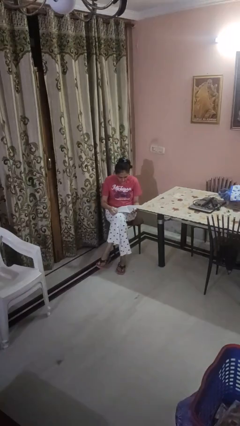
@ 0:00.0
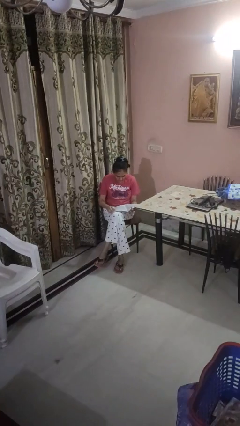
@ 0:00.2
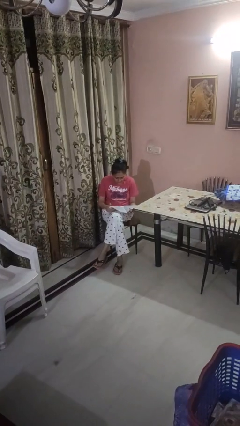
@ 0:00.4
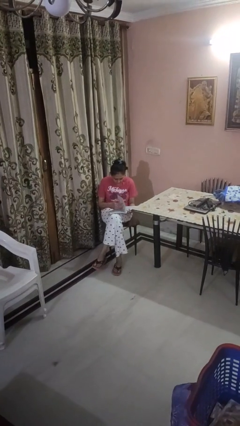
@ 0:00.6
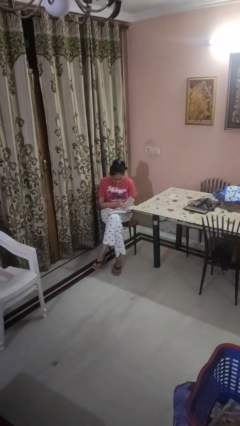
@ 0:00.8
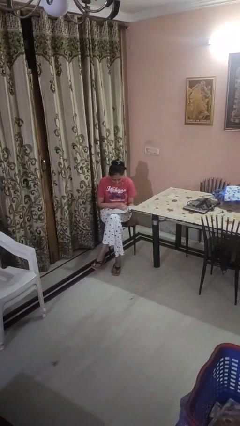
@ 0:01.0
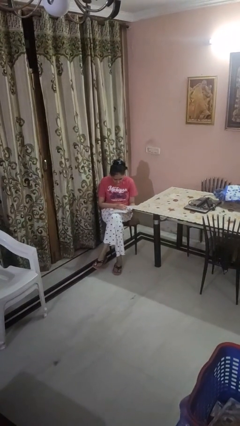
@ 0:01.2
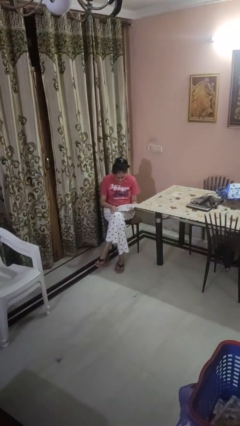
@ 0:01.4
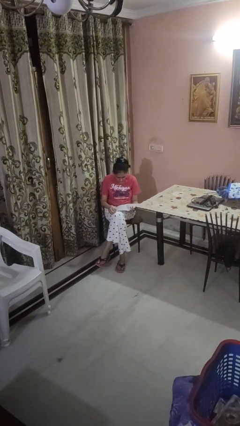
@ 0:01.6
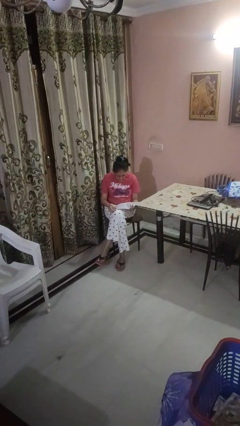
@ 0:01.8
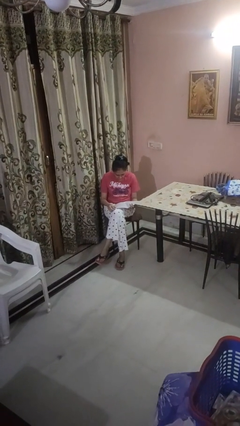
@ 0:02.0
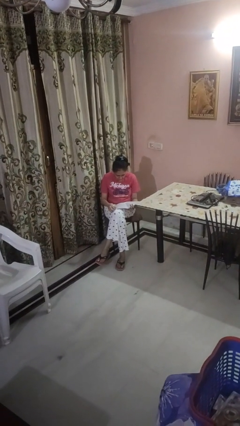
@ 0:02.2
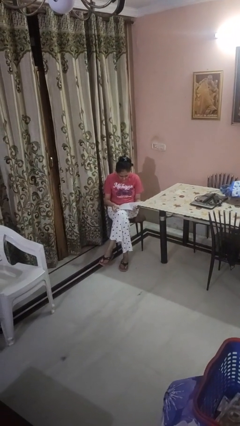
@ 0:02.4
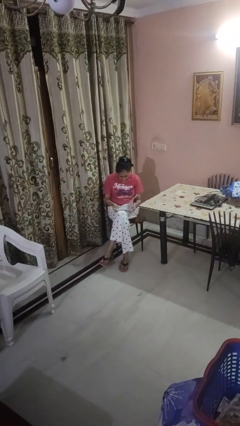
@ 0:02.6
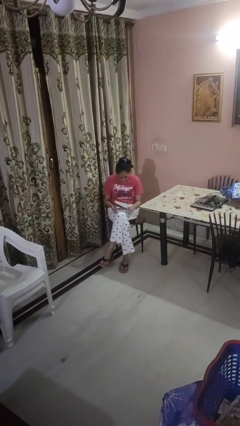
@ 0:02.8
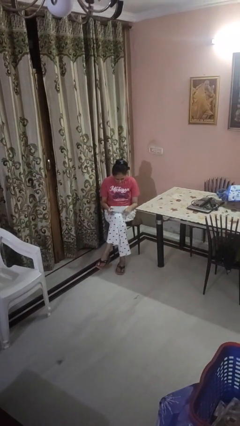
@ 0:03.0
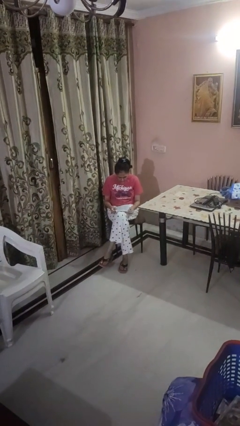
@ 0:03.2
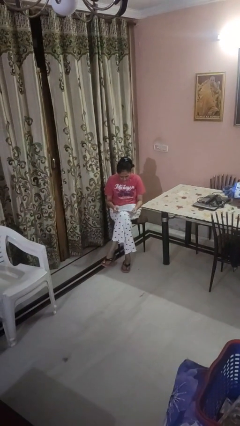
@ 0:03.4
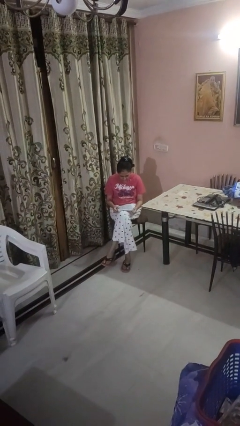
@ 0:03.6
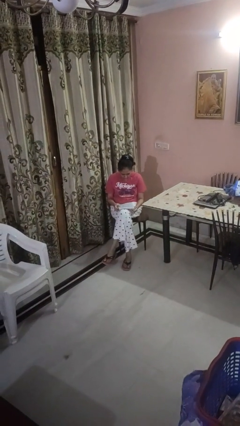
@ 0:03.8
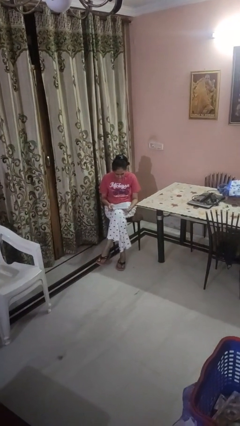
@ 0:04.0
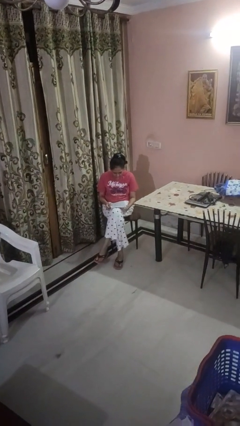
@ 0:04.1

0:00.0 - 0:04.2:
person reads magazine

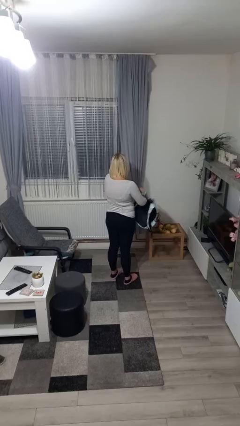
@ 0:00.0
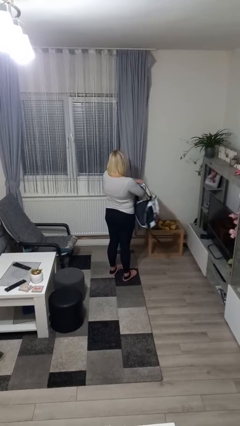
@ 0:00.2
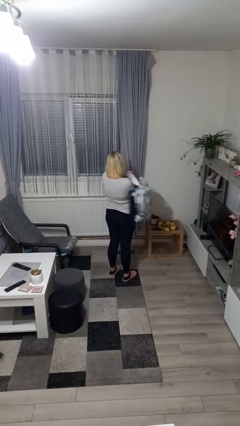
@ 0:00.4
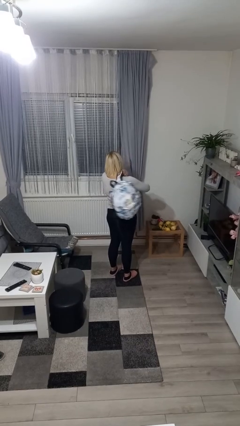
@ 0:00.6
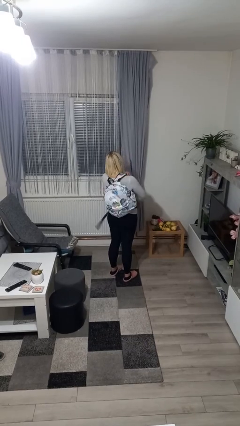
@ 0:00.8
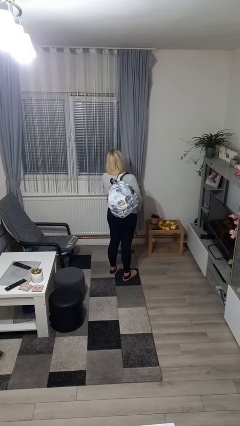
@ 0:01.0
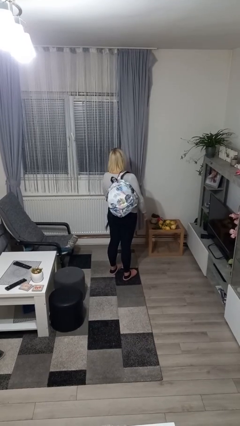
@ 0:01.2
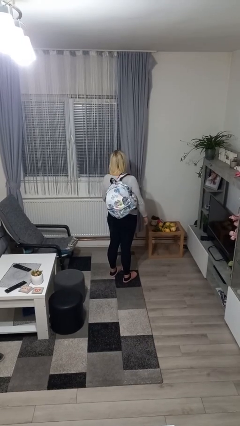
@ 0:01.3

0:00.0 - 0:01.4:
person puts on backpack

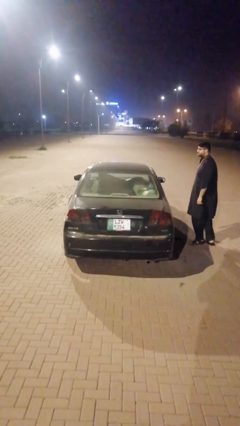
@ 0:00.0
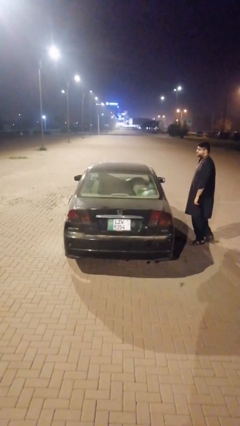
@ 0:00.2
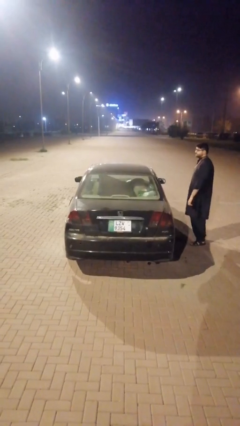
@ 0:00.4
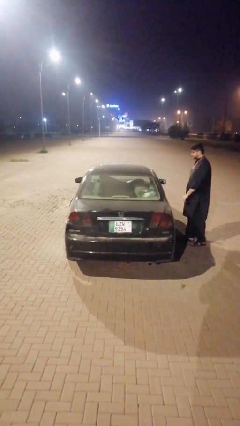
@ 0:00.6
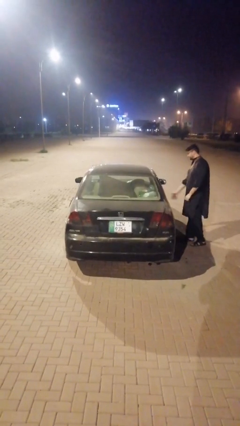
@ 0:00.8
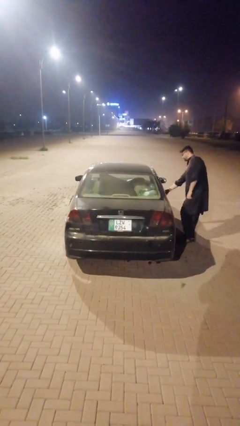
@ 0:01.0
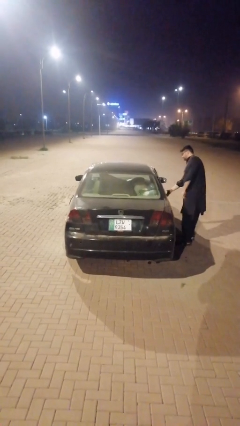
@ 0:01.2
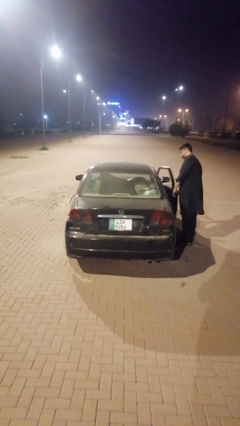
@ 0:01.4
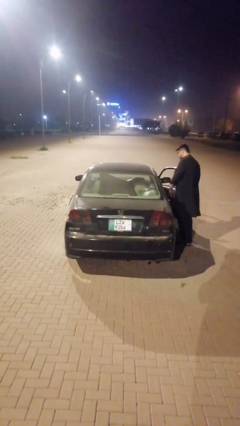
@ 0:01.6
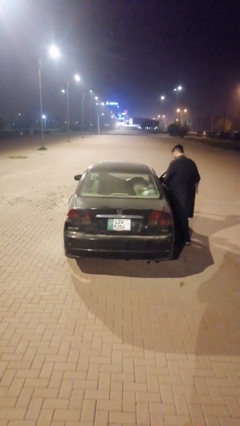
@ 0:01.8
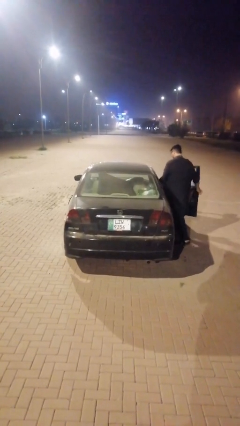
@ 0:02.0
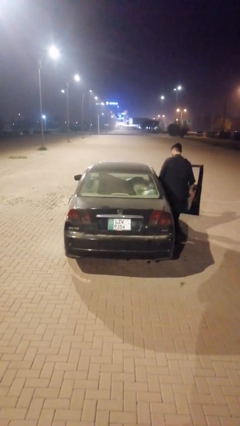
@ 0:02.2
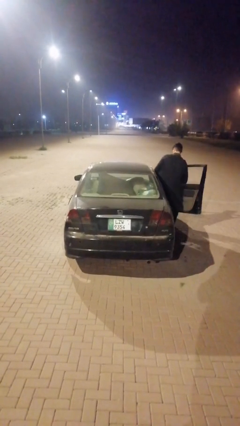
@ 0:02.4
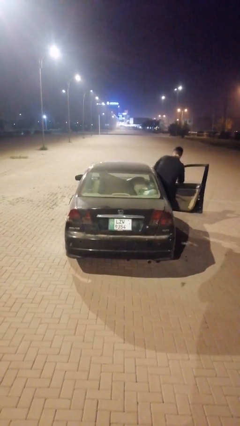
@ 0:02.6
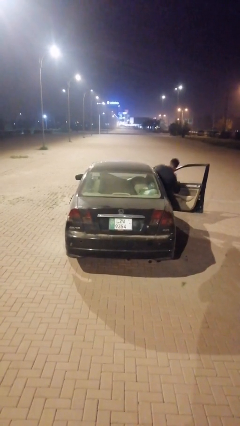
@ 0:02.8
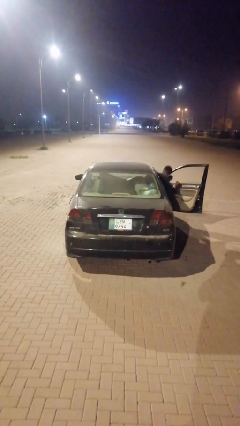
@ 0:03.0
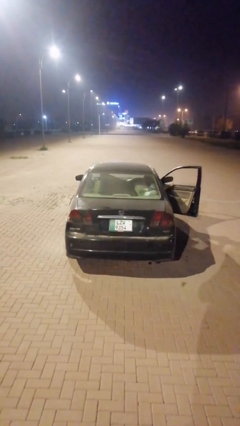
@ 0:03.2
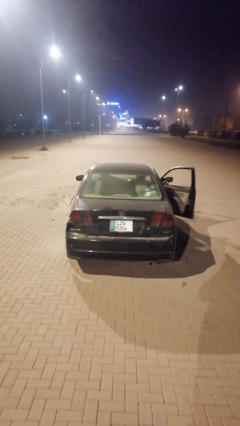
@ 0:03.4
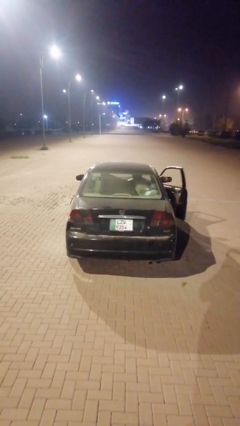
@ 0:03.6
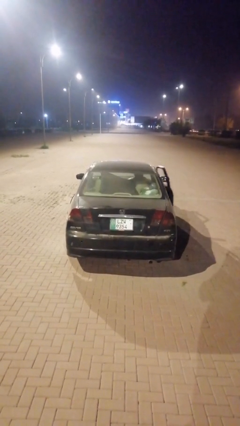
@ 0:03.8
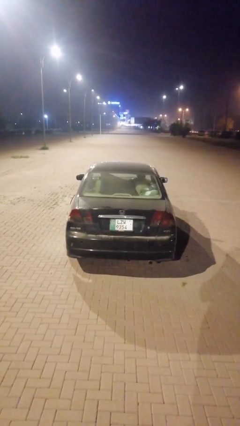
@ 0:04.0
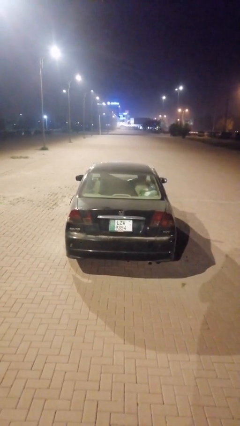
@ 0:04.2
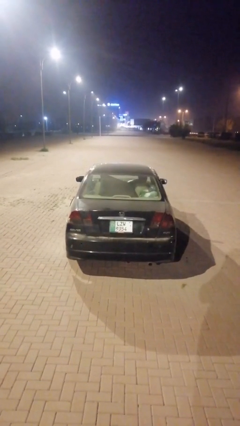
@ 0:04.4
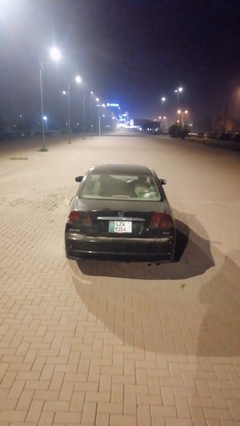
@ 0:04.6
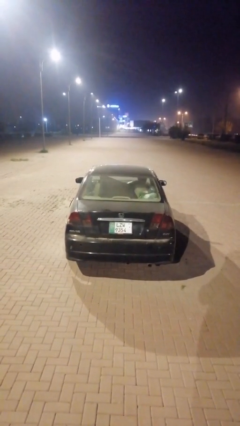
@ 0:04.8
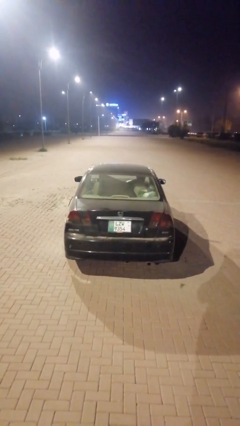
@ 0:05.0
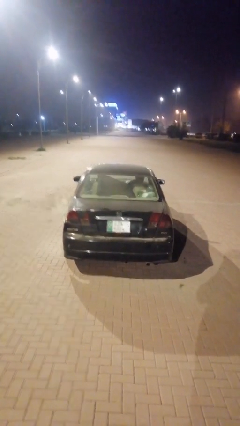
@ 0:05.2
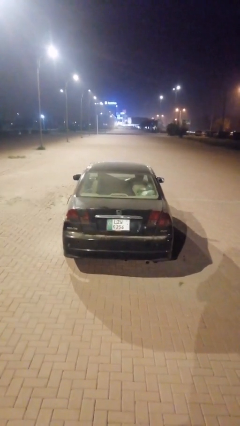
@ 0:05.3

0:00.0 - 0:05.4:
car picks up person

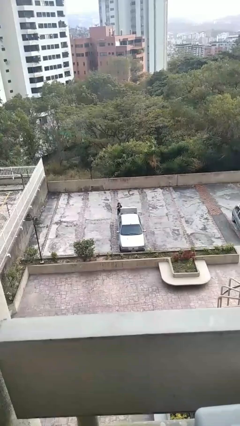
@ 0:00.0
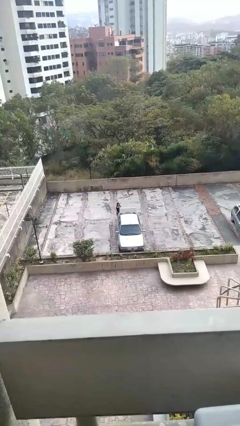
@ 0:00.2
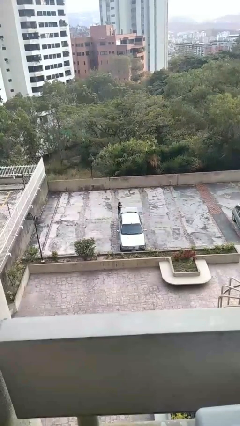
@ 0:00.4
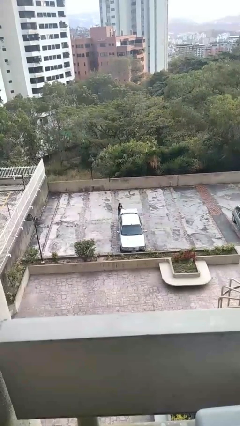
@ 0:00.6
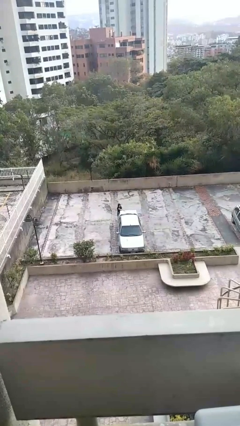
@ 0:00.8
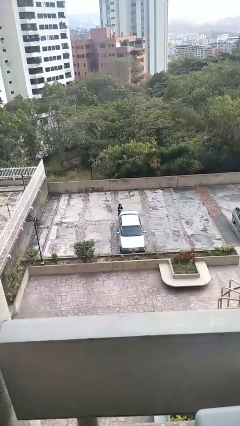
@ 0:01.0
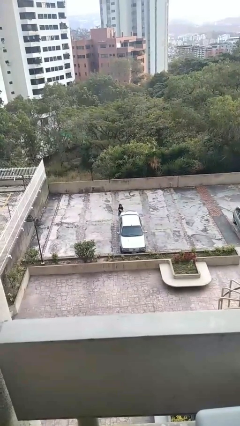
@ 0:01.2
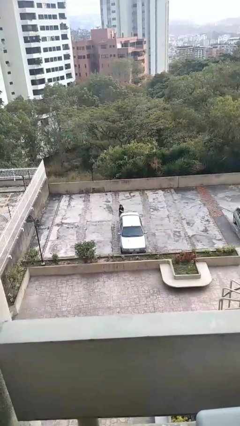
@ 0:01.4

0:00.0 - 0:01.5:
person closes car trunk

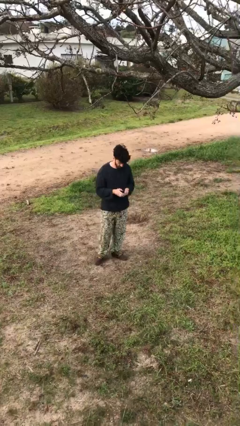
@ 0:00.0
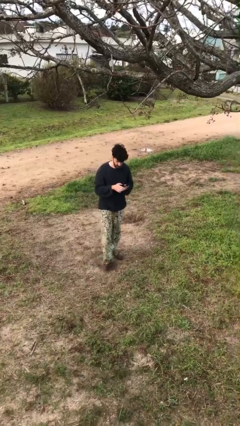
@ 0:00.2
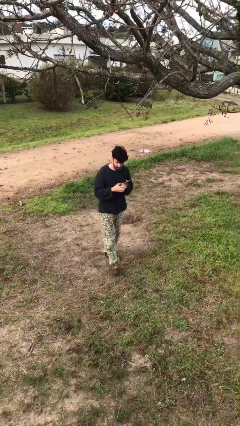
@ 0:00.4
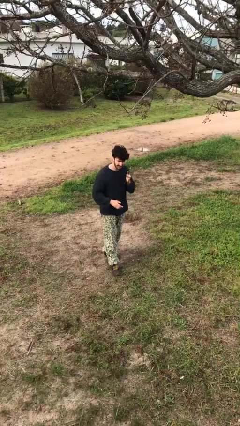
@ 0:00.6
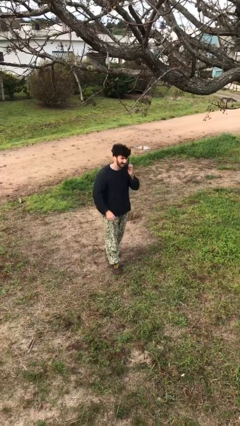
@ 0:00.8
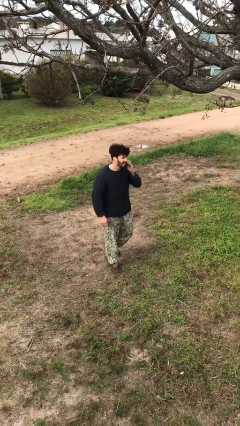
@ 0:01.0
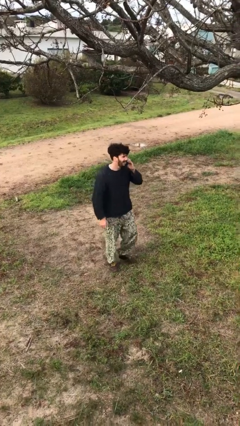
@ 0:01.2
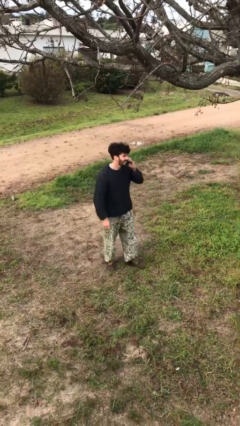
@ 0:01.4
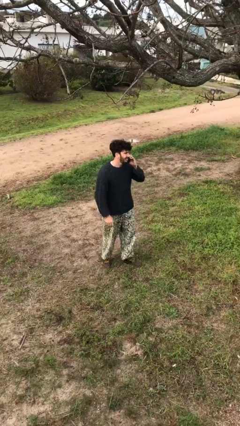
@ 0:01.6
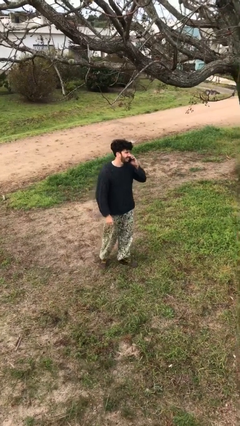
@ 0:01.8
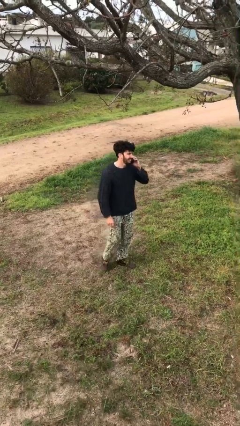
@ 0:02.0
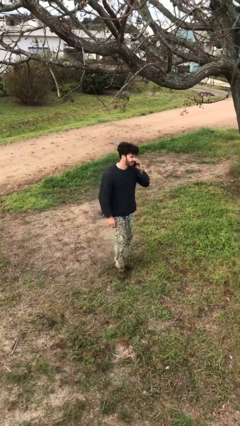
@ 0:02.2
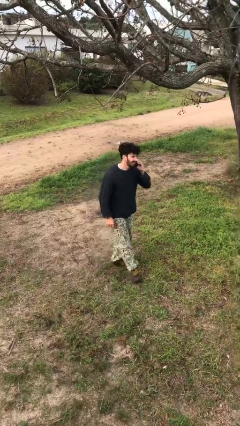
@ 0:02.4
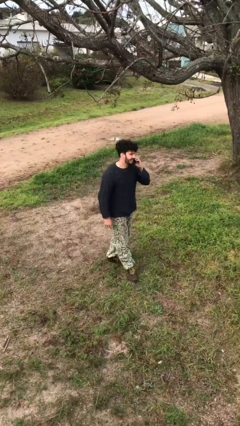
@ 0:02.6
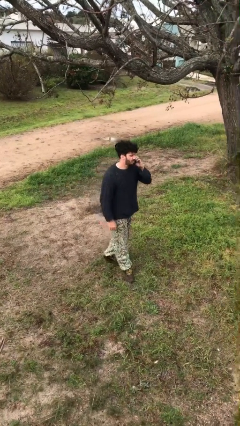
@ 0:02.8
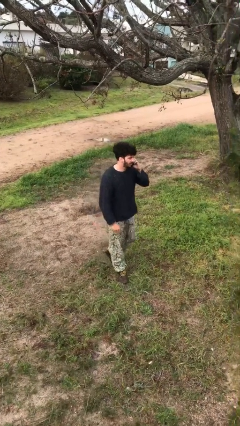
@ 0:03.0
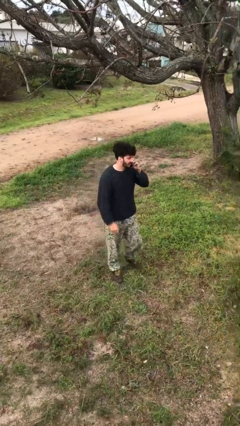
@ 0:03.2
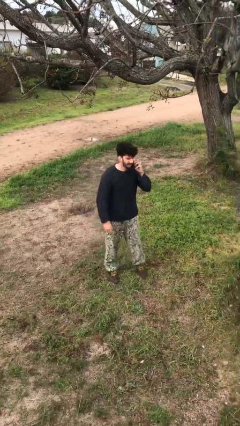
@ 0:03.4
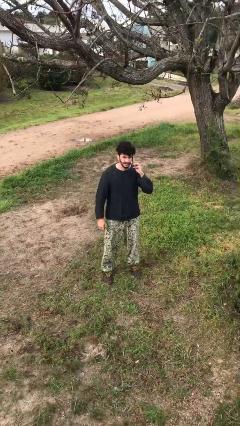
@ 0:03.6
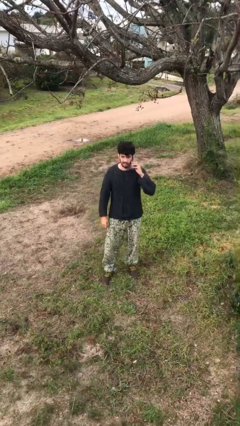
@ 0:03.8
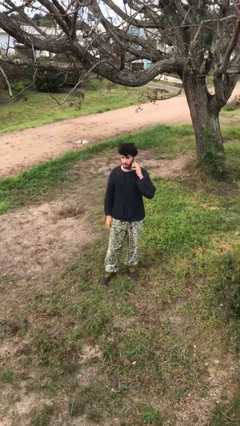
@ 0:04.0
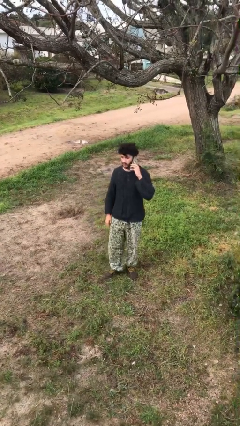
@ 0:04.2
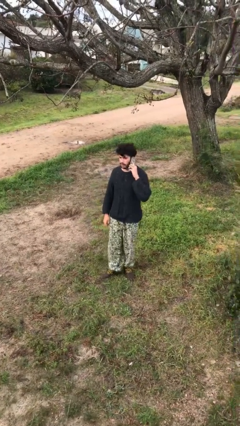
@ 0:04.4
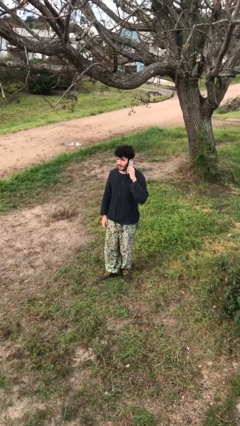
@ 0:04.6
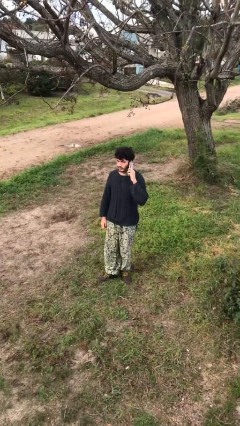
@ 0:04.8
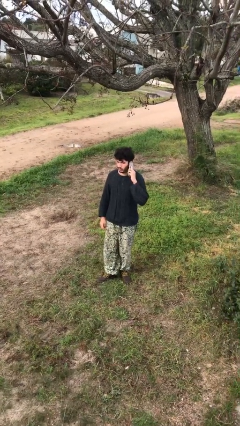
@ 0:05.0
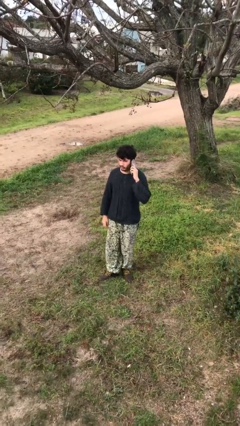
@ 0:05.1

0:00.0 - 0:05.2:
person talks on phone
